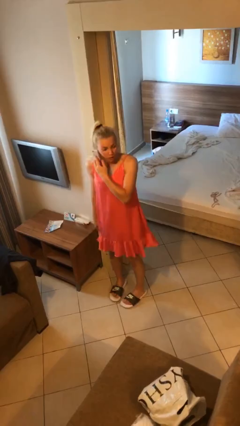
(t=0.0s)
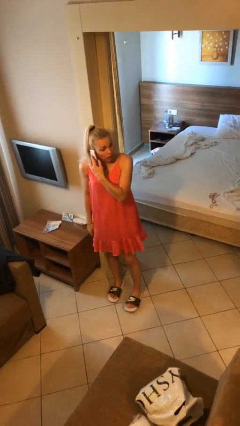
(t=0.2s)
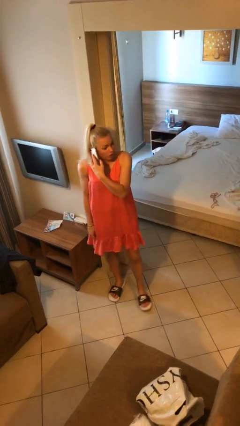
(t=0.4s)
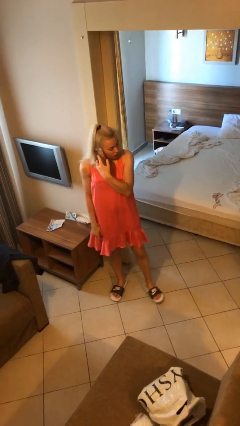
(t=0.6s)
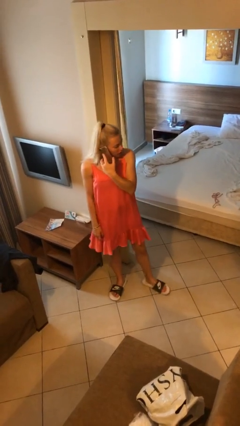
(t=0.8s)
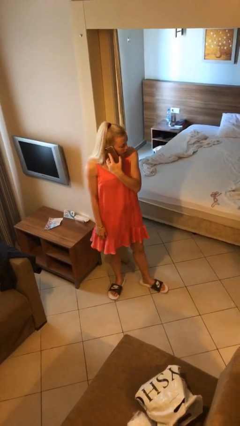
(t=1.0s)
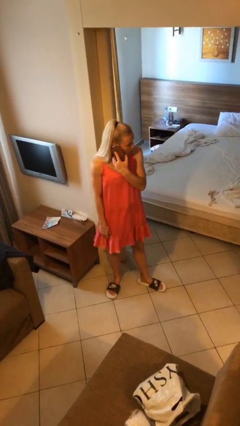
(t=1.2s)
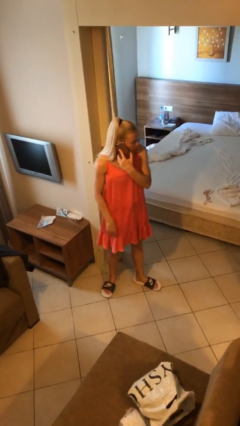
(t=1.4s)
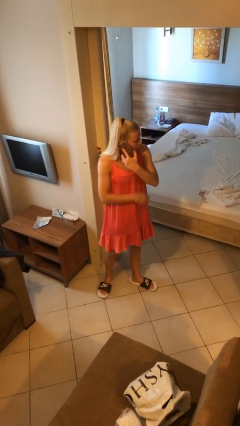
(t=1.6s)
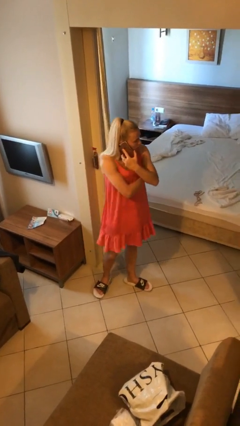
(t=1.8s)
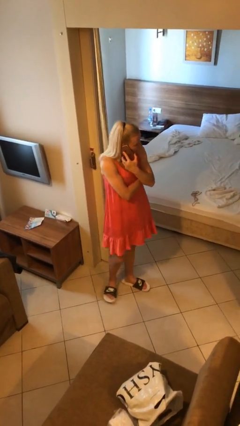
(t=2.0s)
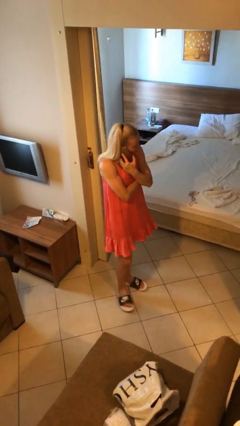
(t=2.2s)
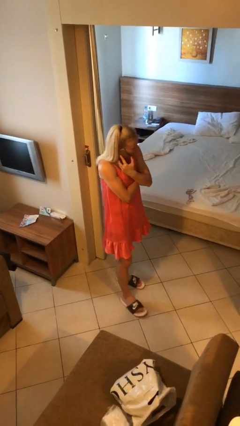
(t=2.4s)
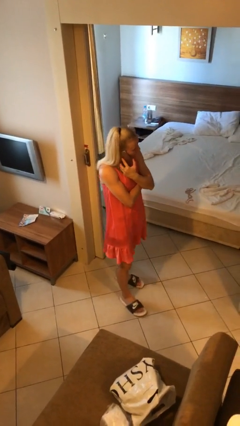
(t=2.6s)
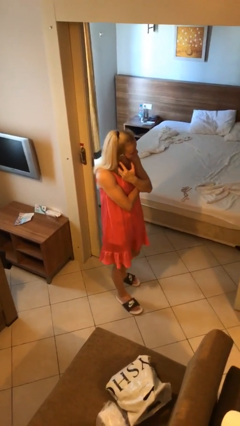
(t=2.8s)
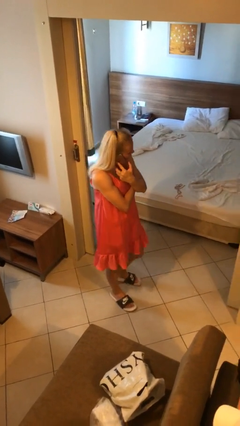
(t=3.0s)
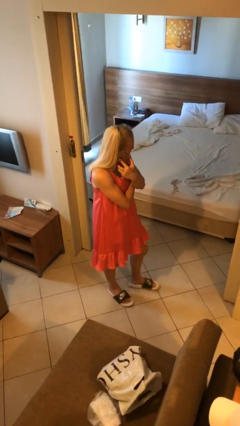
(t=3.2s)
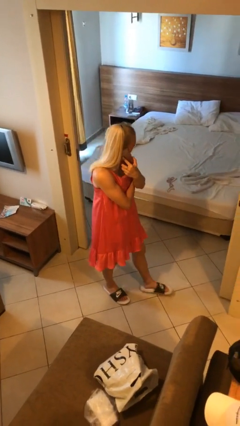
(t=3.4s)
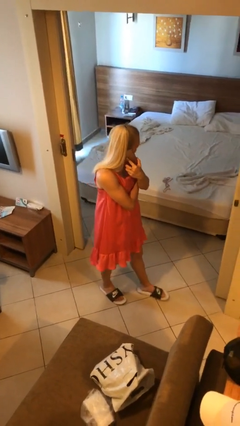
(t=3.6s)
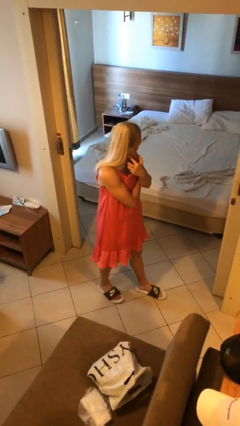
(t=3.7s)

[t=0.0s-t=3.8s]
person talks on phone

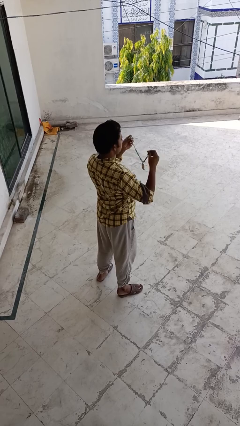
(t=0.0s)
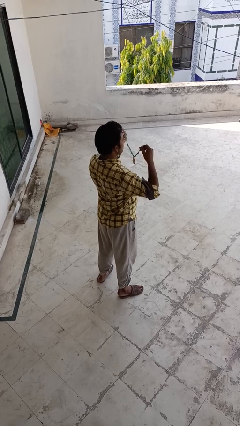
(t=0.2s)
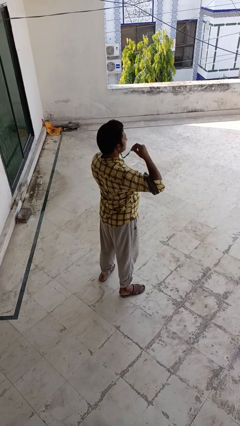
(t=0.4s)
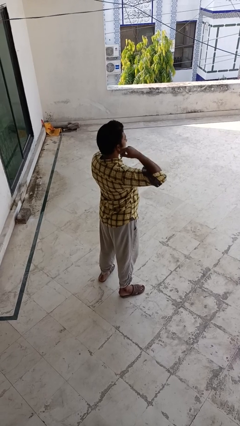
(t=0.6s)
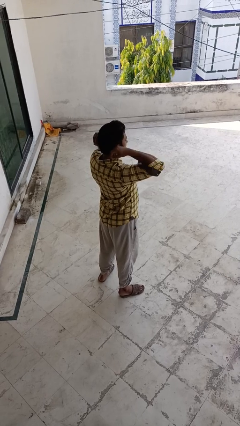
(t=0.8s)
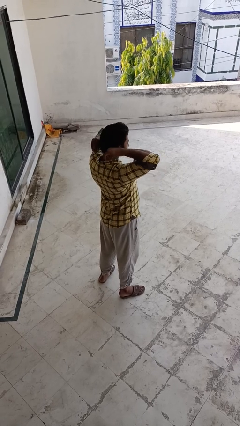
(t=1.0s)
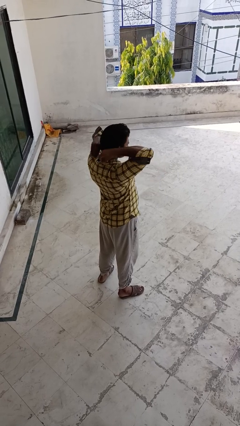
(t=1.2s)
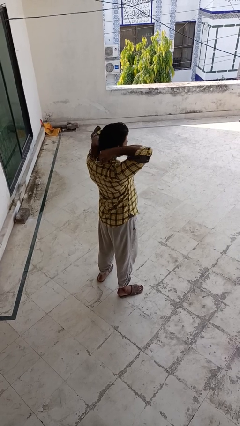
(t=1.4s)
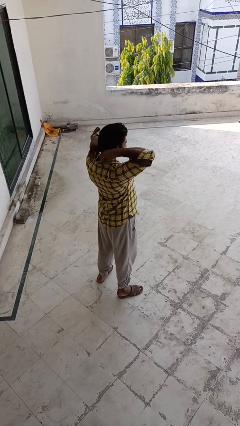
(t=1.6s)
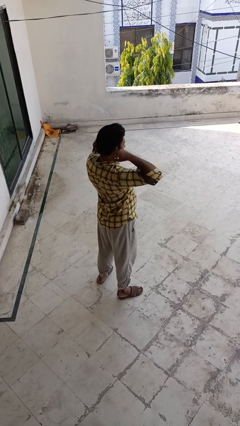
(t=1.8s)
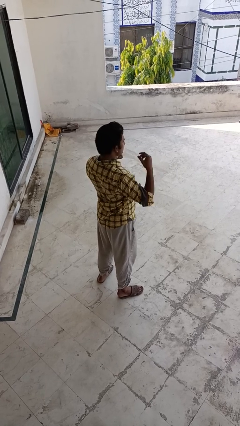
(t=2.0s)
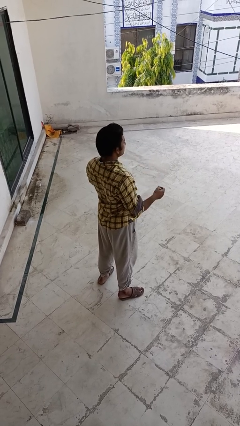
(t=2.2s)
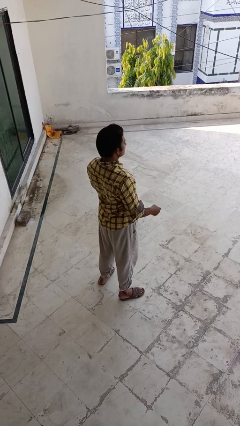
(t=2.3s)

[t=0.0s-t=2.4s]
person puts on necklace

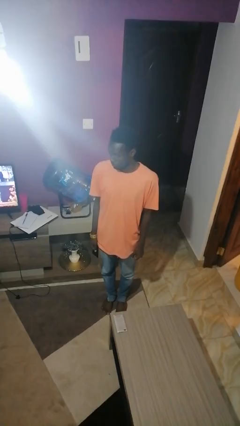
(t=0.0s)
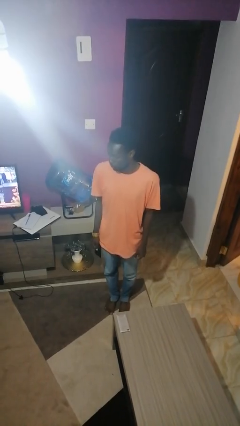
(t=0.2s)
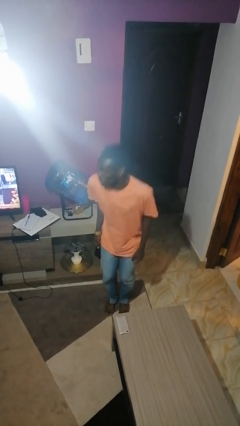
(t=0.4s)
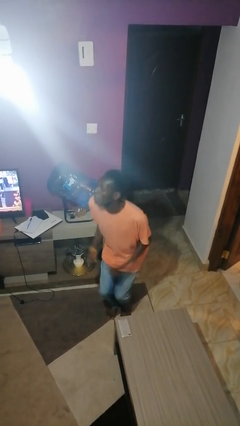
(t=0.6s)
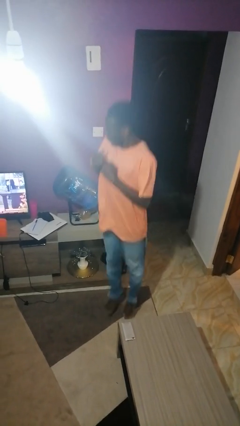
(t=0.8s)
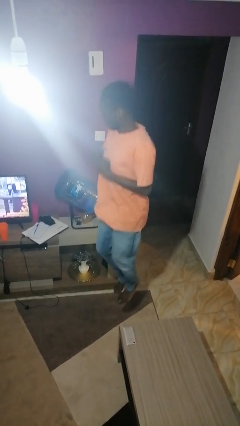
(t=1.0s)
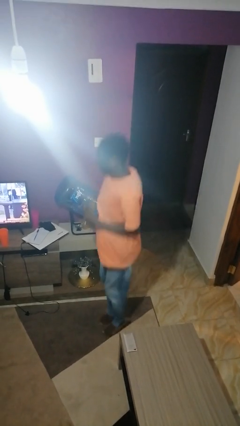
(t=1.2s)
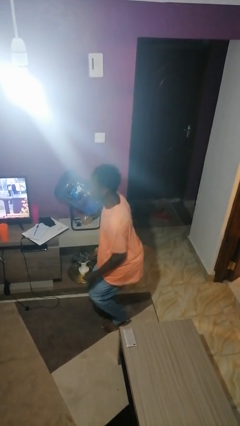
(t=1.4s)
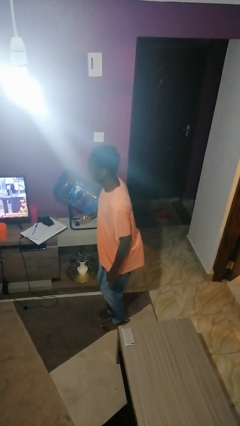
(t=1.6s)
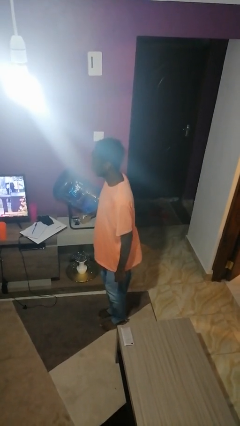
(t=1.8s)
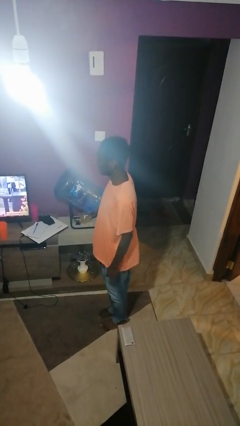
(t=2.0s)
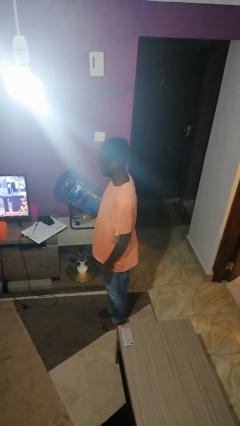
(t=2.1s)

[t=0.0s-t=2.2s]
person jumps

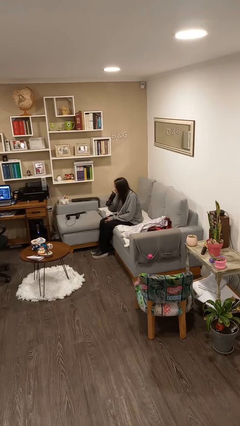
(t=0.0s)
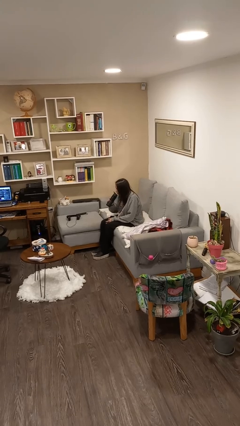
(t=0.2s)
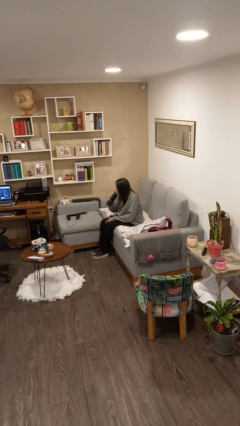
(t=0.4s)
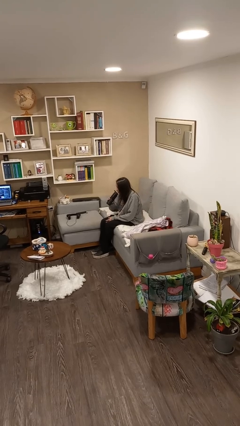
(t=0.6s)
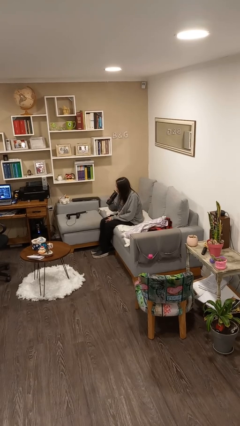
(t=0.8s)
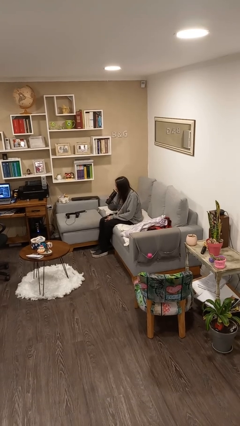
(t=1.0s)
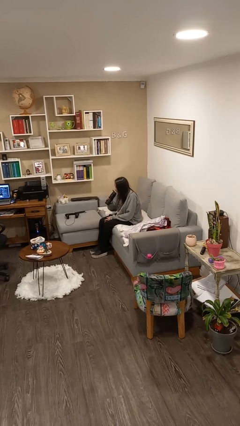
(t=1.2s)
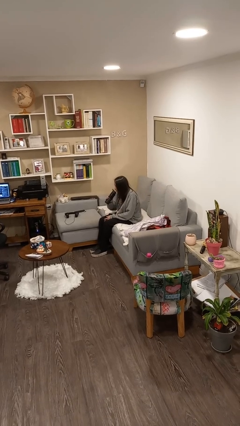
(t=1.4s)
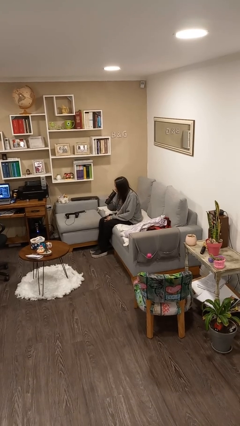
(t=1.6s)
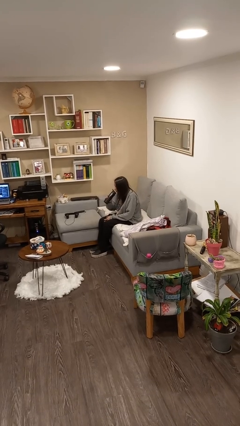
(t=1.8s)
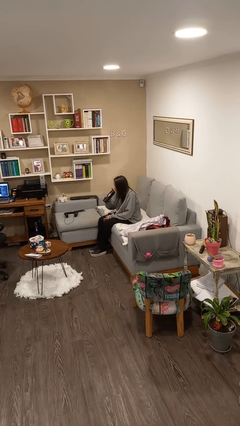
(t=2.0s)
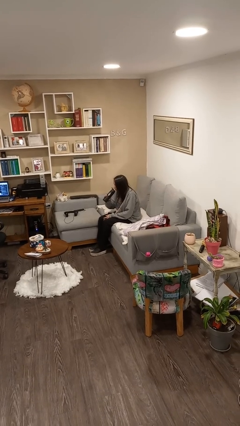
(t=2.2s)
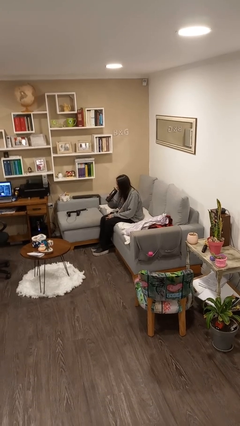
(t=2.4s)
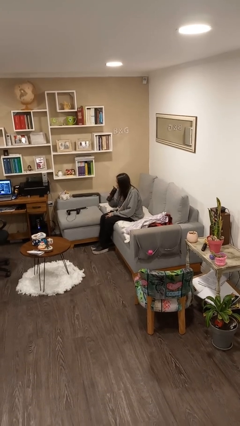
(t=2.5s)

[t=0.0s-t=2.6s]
person drinks from bottle

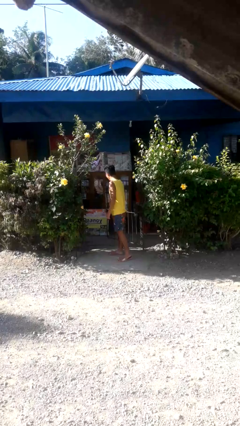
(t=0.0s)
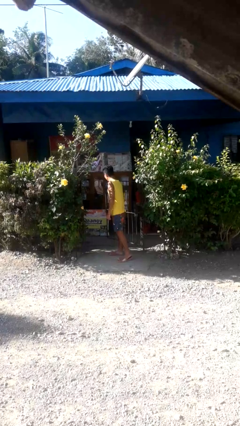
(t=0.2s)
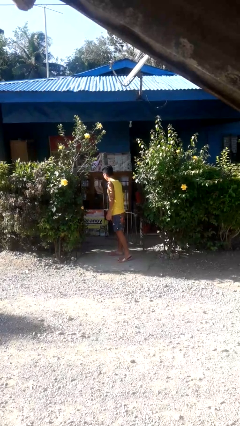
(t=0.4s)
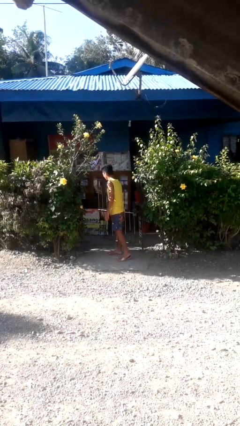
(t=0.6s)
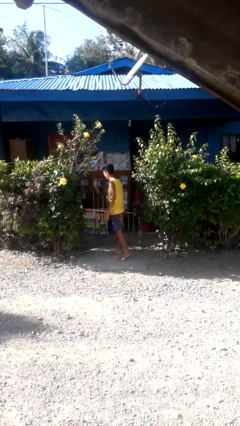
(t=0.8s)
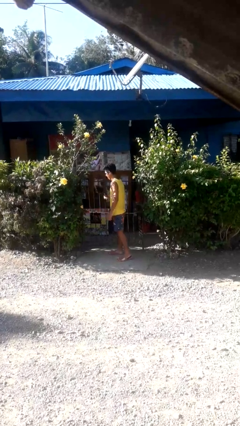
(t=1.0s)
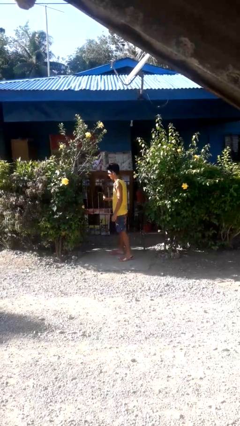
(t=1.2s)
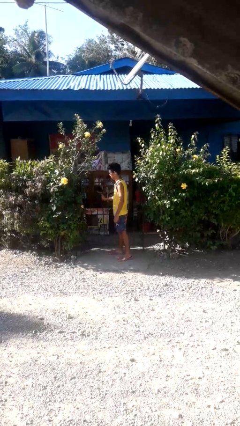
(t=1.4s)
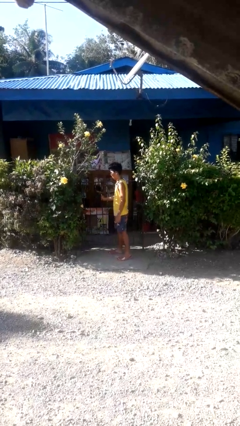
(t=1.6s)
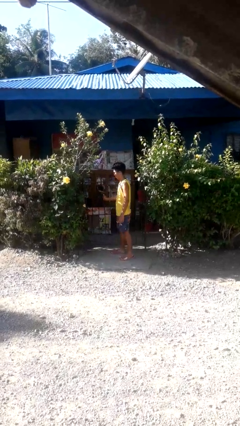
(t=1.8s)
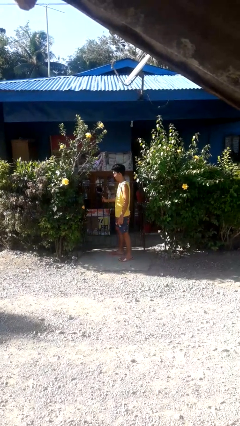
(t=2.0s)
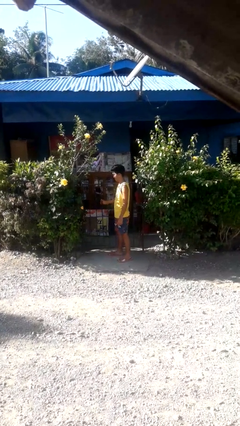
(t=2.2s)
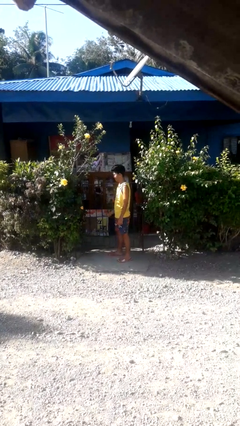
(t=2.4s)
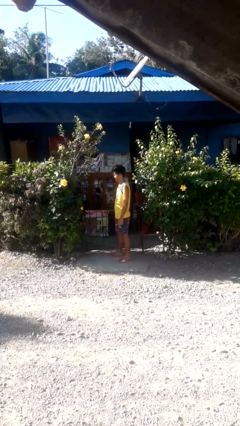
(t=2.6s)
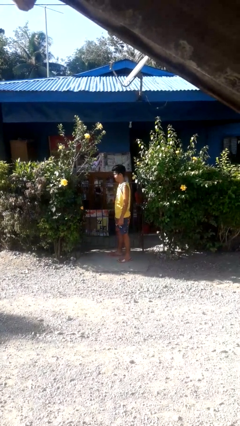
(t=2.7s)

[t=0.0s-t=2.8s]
person closes gate

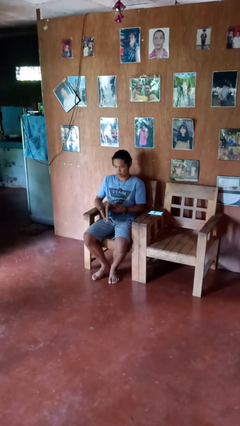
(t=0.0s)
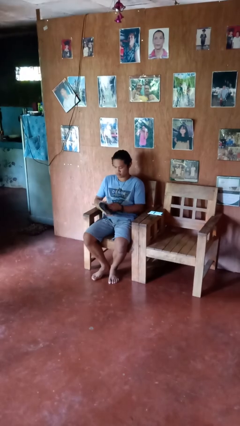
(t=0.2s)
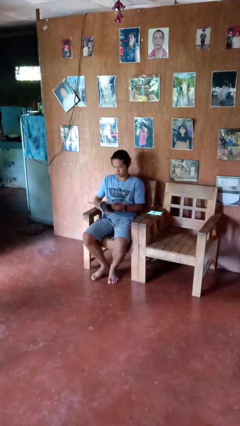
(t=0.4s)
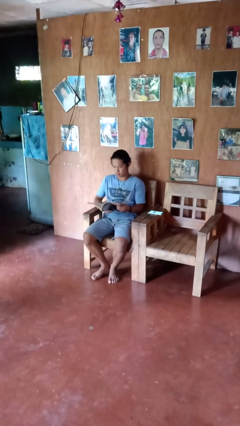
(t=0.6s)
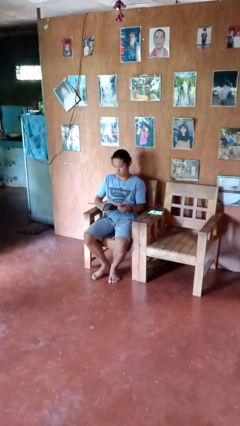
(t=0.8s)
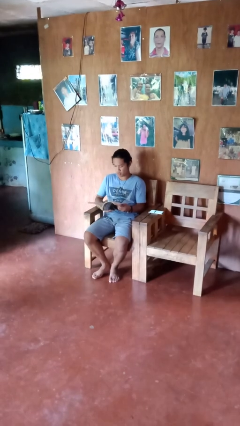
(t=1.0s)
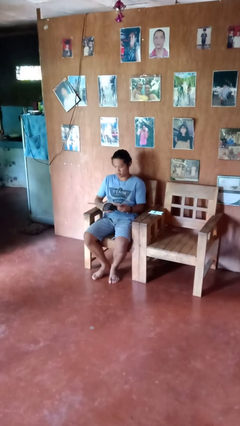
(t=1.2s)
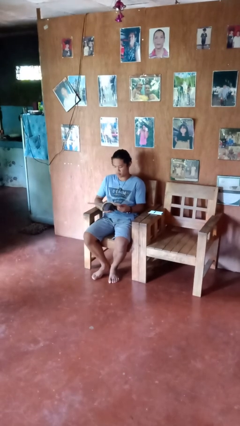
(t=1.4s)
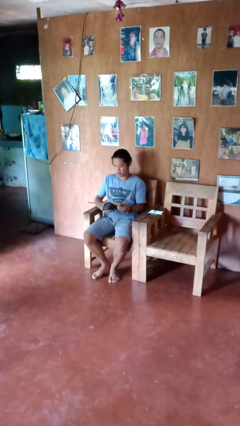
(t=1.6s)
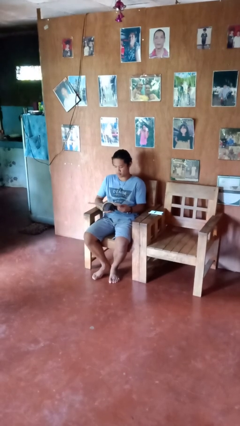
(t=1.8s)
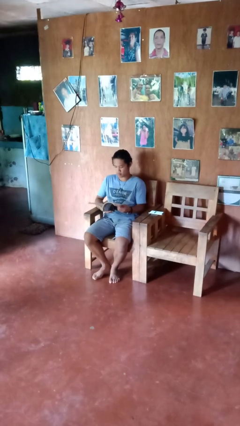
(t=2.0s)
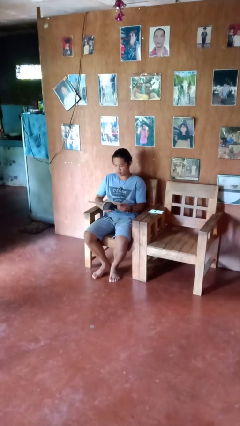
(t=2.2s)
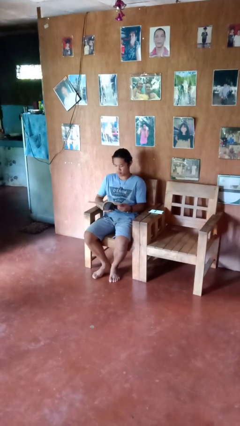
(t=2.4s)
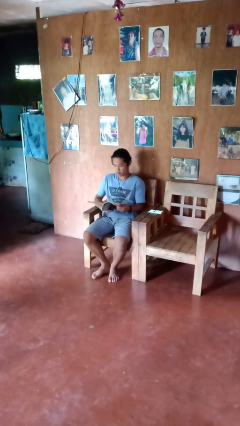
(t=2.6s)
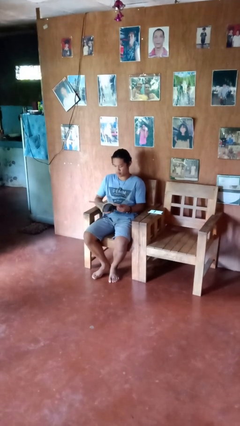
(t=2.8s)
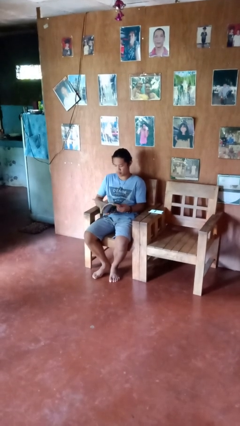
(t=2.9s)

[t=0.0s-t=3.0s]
person reads book

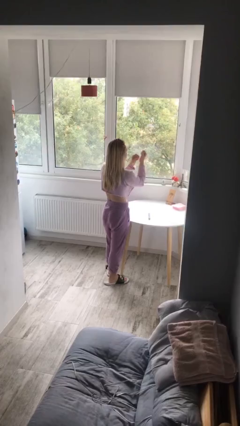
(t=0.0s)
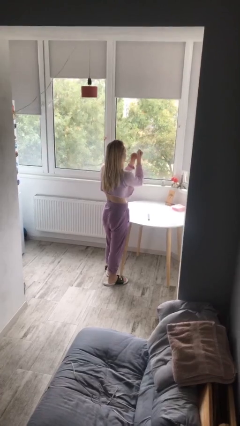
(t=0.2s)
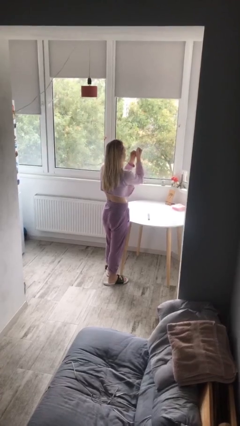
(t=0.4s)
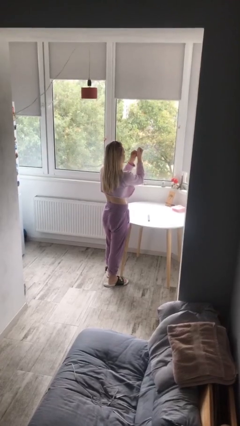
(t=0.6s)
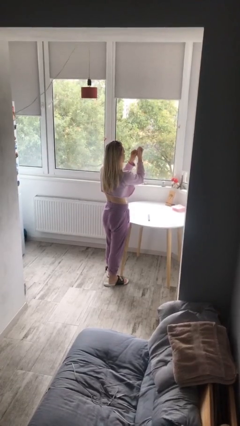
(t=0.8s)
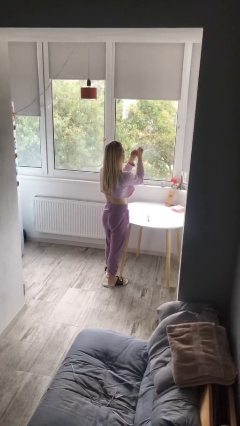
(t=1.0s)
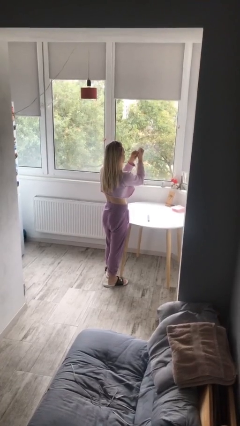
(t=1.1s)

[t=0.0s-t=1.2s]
person clips fingernails
